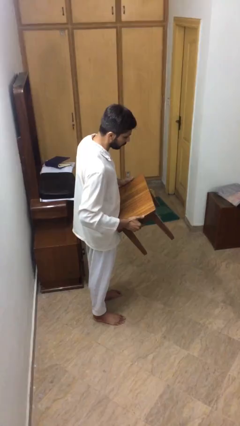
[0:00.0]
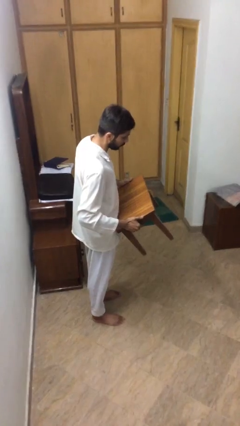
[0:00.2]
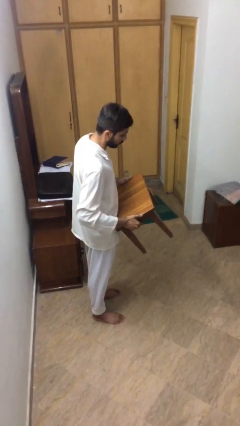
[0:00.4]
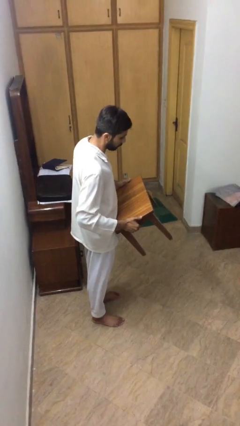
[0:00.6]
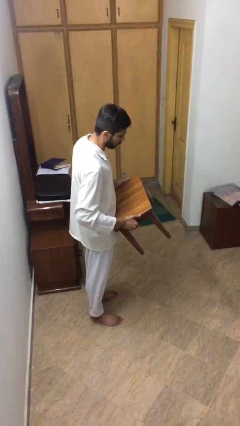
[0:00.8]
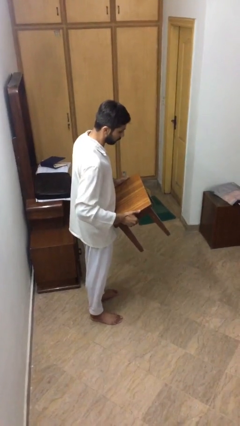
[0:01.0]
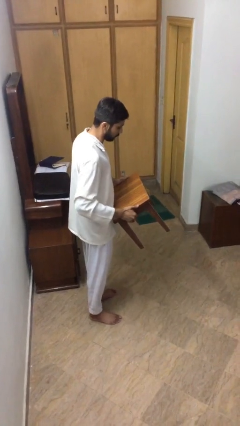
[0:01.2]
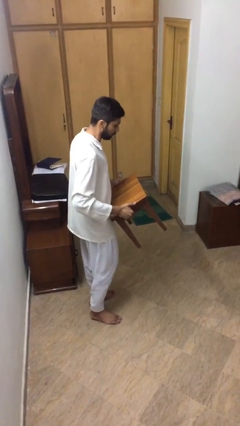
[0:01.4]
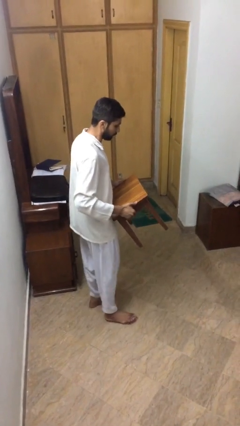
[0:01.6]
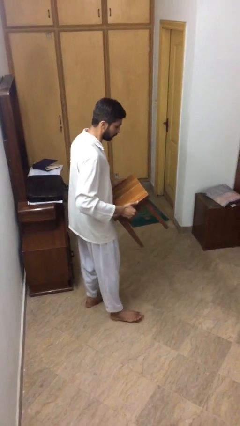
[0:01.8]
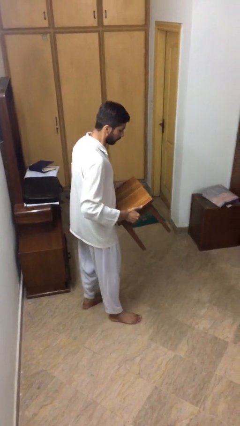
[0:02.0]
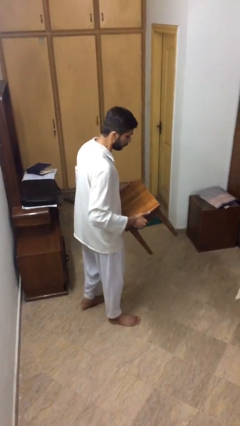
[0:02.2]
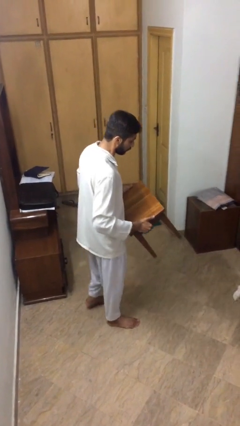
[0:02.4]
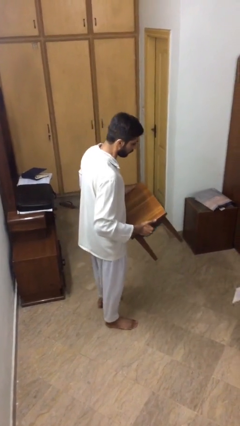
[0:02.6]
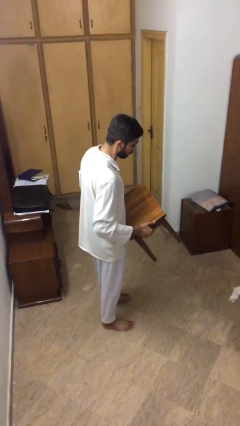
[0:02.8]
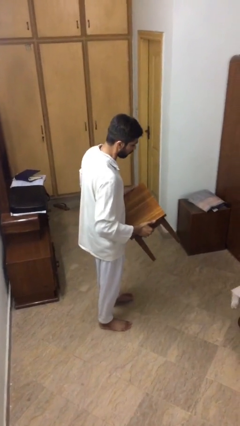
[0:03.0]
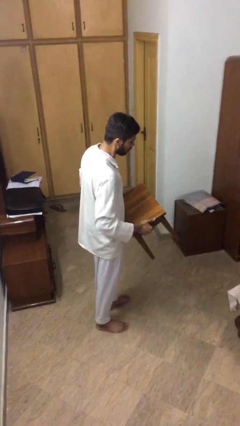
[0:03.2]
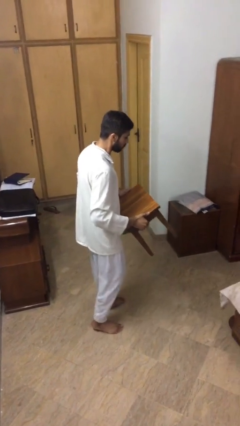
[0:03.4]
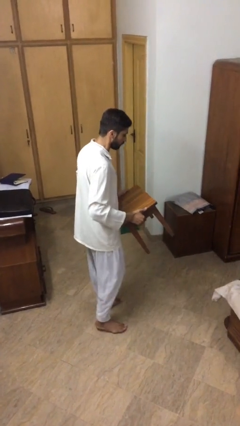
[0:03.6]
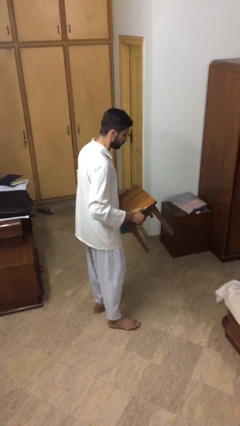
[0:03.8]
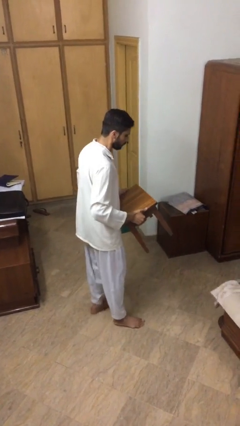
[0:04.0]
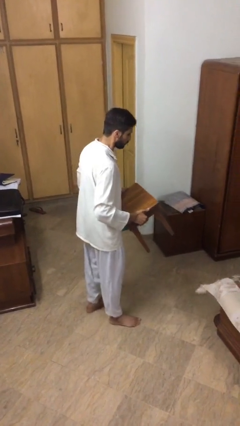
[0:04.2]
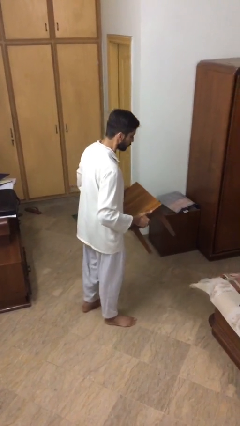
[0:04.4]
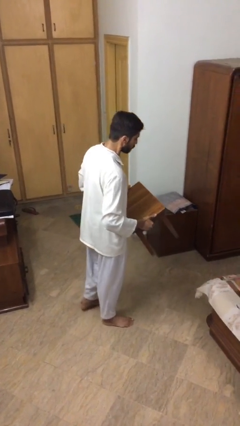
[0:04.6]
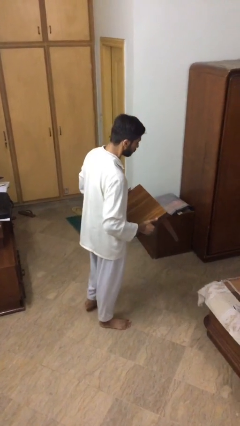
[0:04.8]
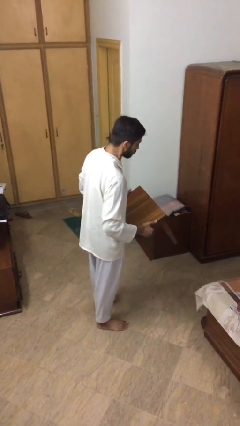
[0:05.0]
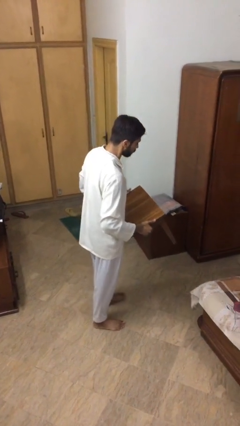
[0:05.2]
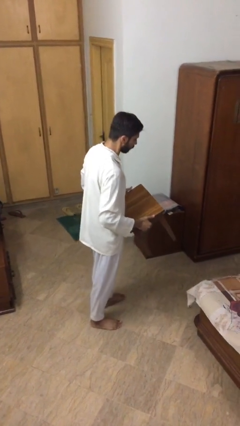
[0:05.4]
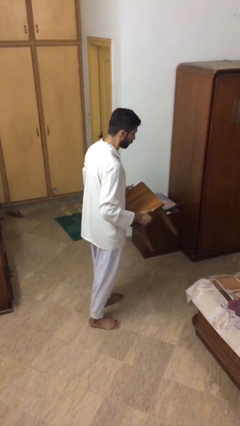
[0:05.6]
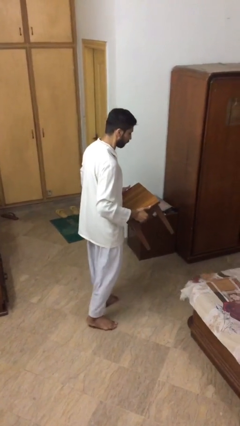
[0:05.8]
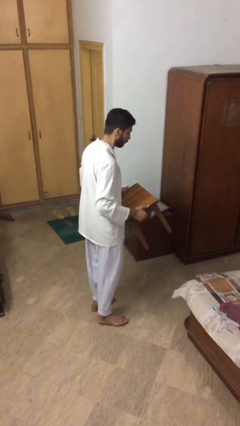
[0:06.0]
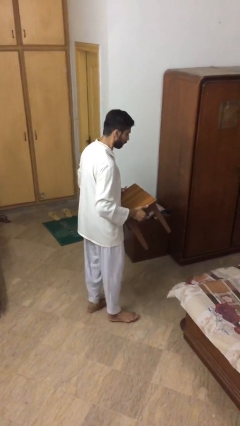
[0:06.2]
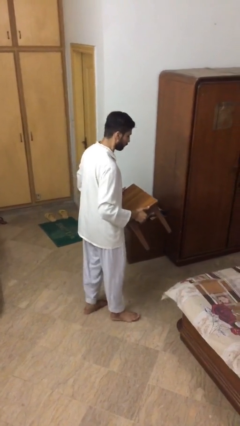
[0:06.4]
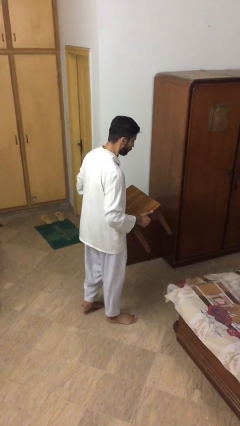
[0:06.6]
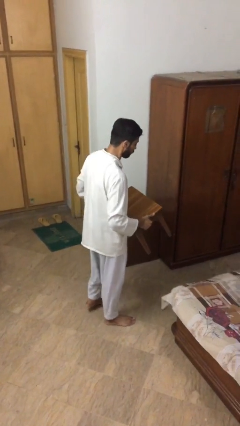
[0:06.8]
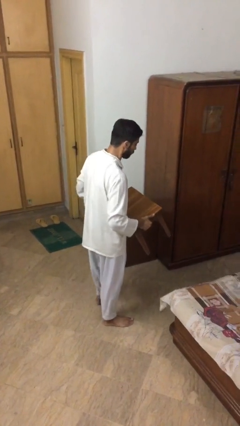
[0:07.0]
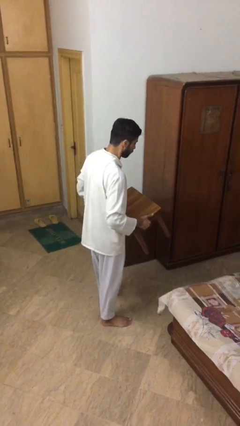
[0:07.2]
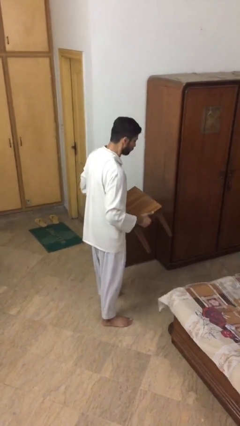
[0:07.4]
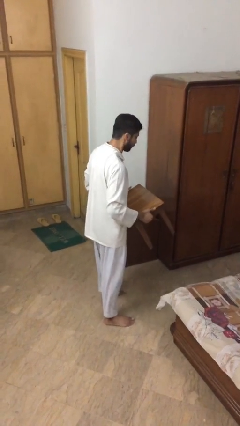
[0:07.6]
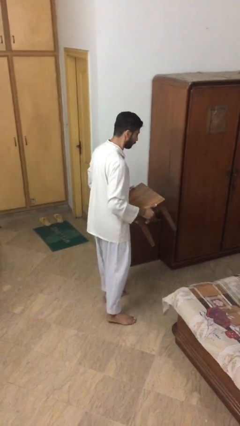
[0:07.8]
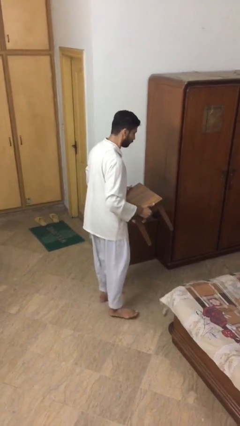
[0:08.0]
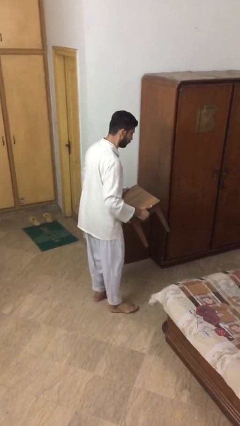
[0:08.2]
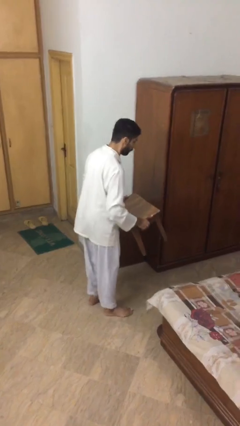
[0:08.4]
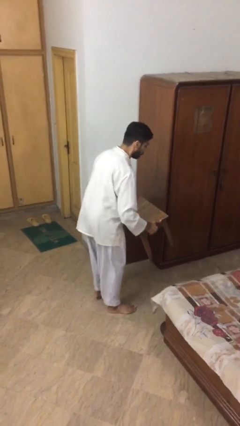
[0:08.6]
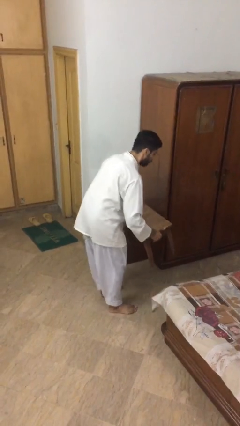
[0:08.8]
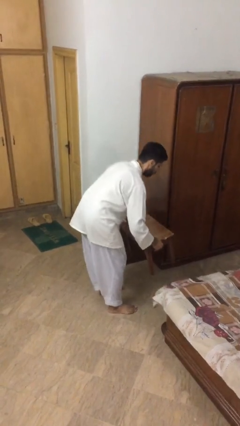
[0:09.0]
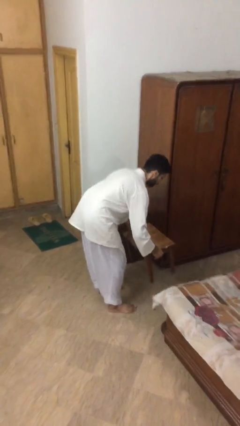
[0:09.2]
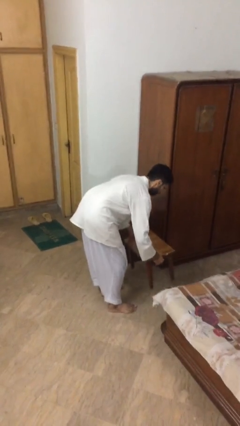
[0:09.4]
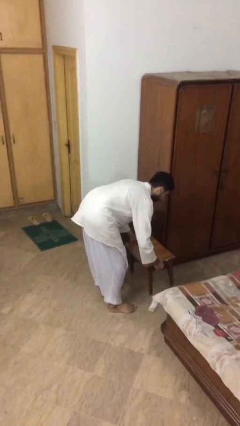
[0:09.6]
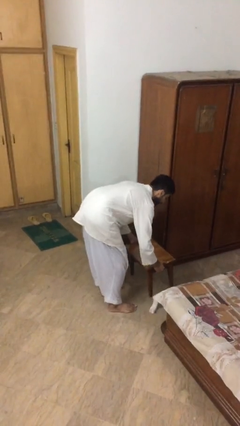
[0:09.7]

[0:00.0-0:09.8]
person carries heavy object

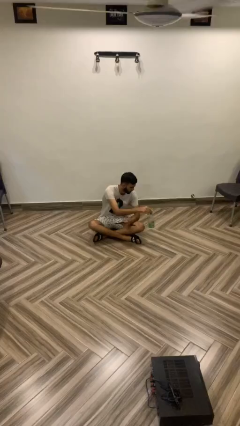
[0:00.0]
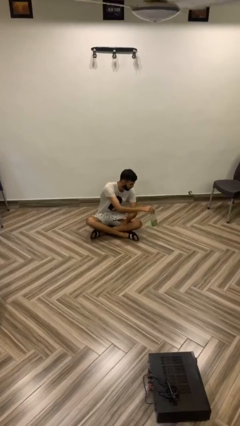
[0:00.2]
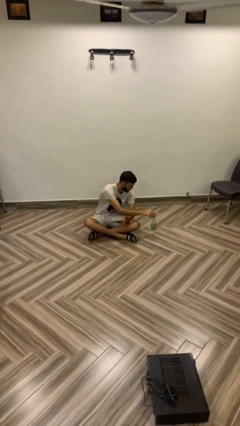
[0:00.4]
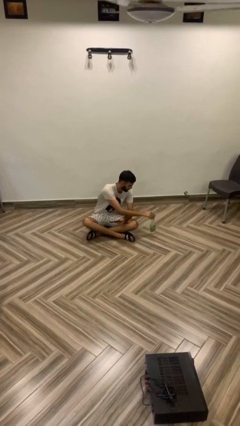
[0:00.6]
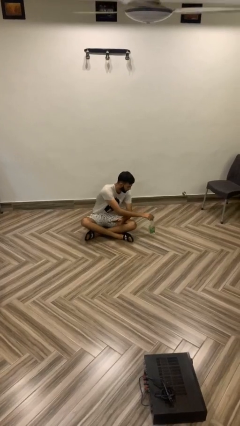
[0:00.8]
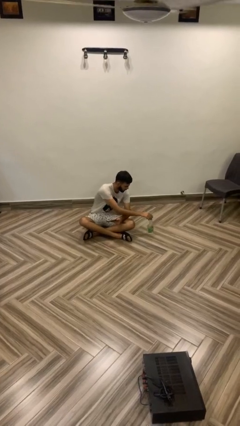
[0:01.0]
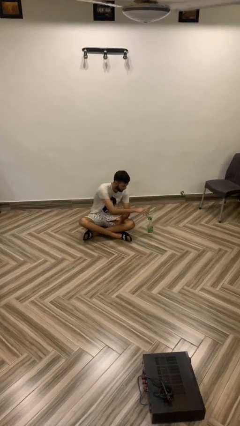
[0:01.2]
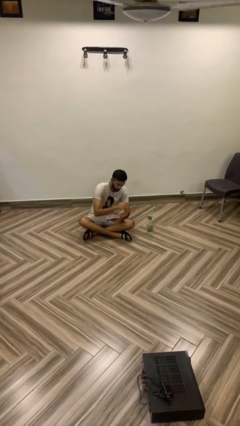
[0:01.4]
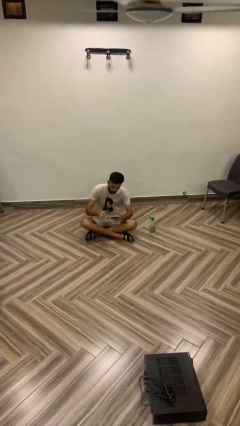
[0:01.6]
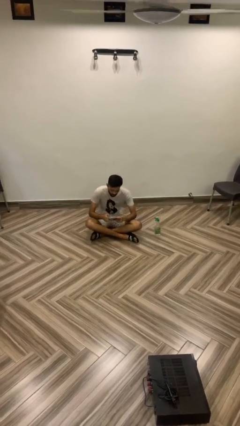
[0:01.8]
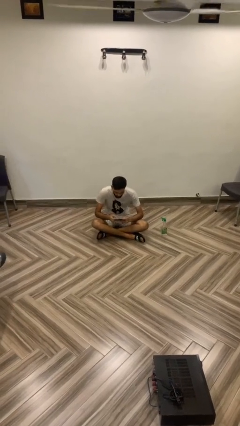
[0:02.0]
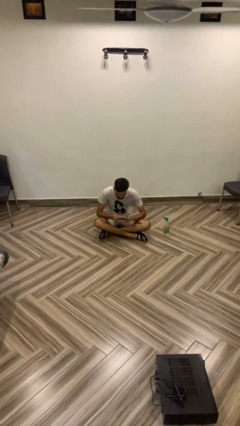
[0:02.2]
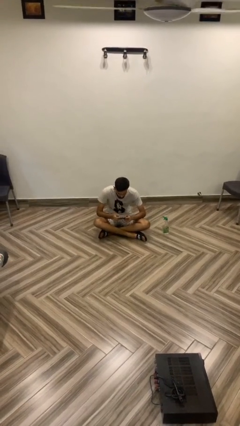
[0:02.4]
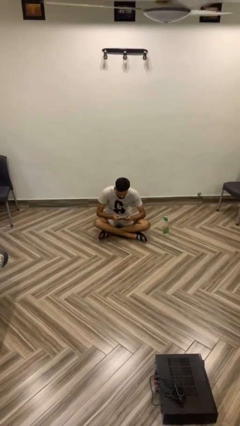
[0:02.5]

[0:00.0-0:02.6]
person puts down object on floor

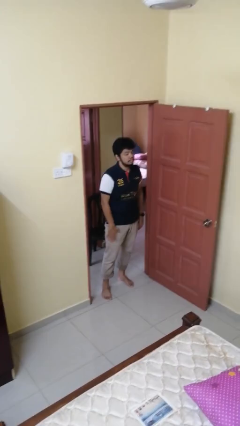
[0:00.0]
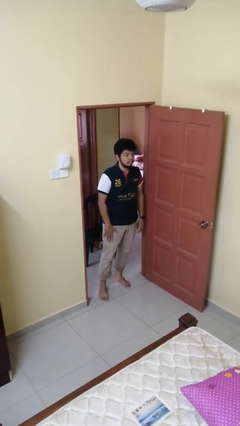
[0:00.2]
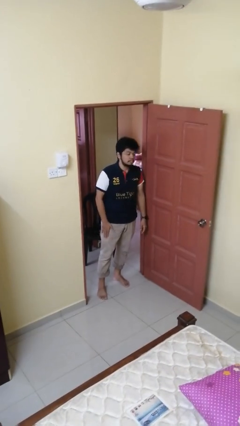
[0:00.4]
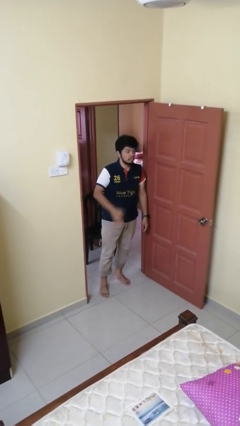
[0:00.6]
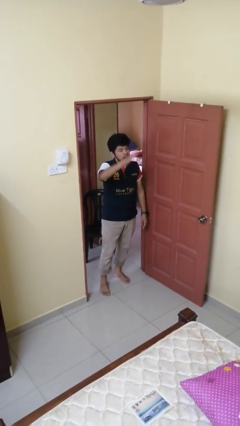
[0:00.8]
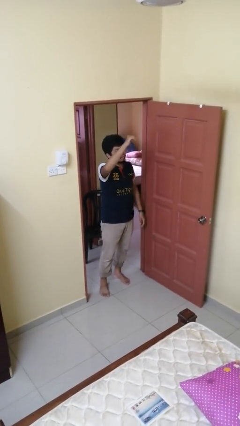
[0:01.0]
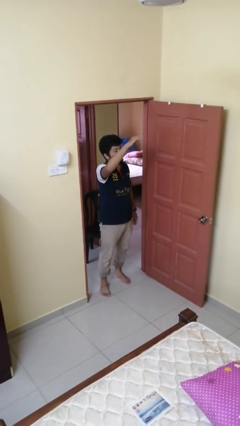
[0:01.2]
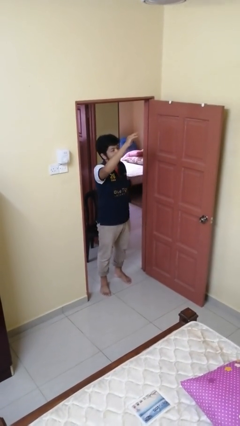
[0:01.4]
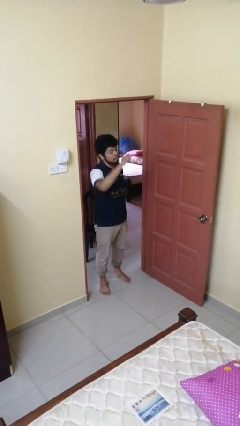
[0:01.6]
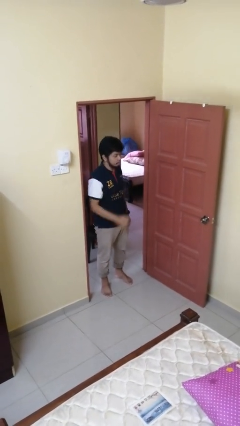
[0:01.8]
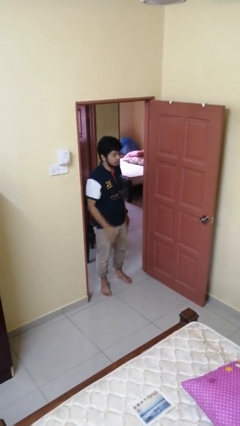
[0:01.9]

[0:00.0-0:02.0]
person gestures come here

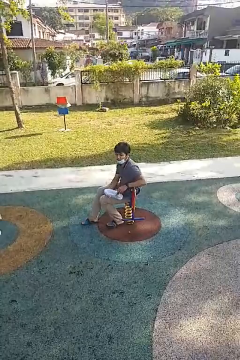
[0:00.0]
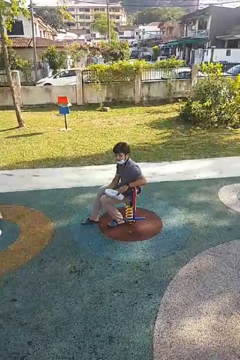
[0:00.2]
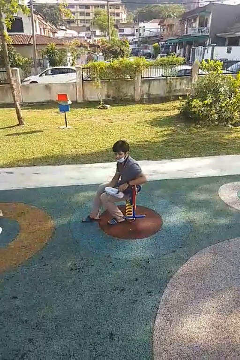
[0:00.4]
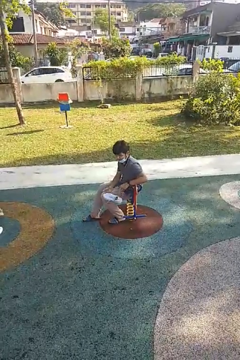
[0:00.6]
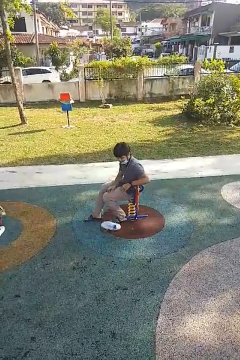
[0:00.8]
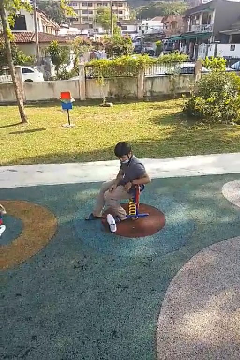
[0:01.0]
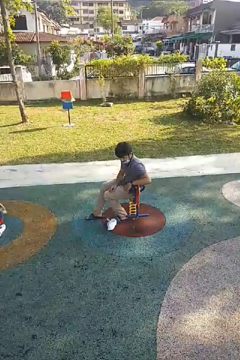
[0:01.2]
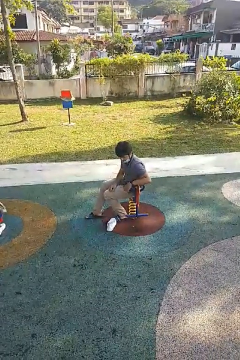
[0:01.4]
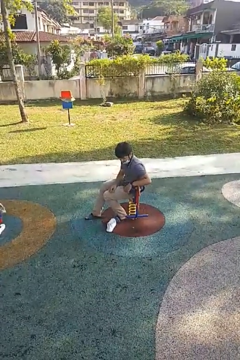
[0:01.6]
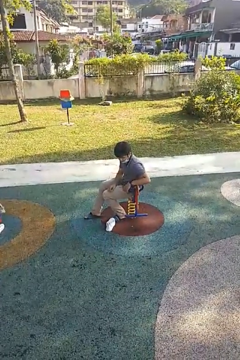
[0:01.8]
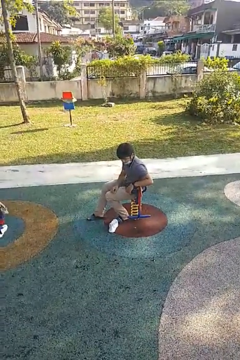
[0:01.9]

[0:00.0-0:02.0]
person drops object

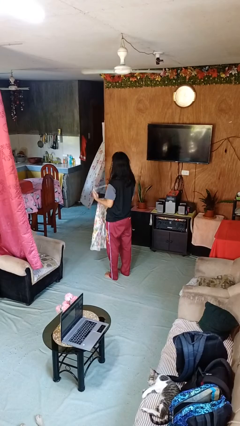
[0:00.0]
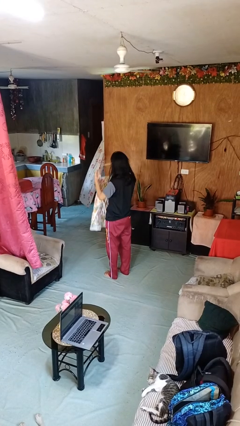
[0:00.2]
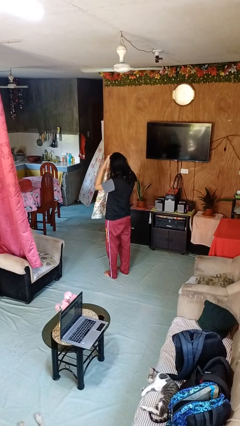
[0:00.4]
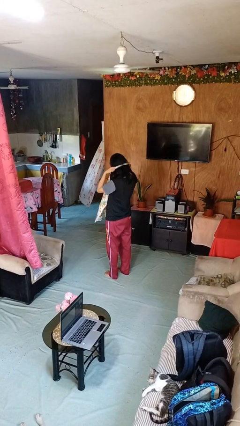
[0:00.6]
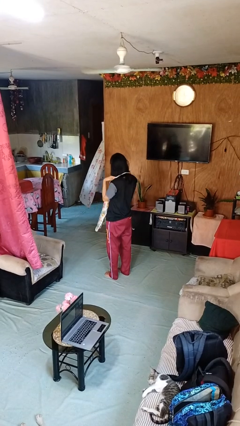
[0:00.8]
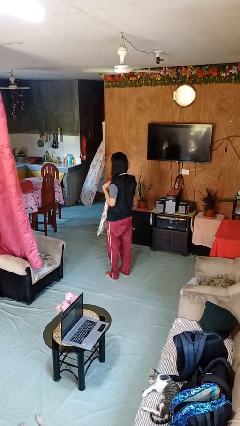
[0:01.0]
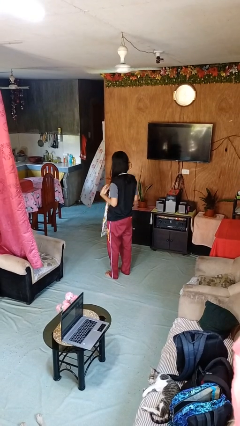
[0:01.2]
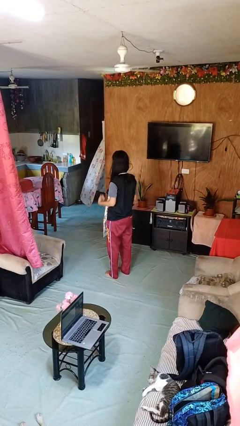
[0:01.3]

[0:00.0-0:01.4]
person puts on apron

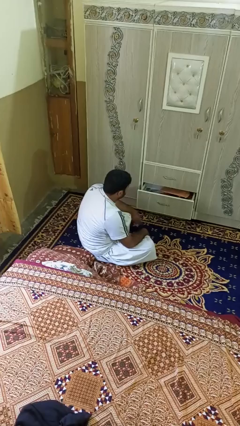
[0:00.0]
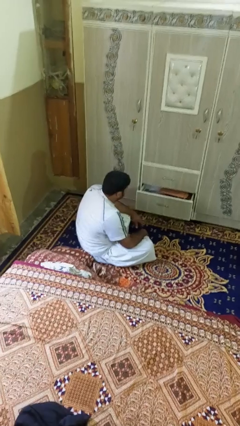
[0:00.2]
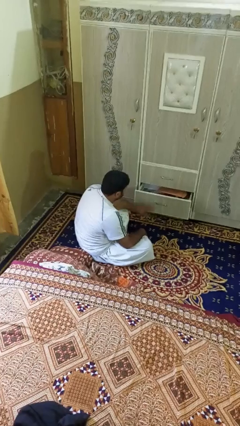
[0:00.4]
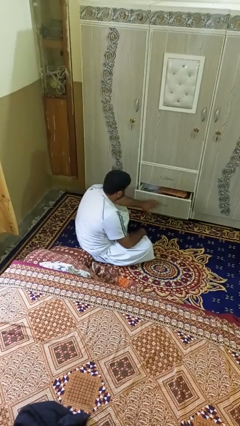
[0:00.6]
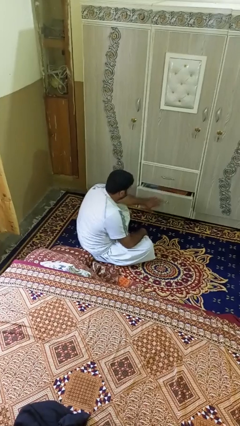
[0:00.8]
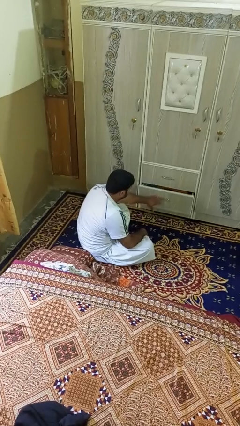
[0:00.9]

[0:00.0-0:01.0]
person closes dresser drawer
